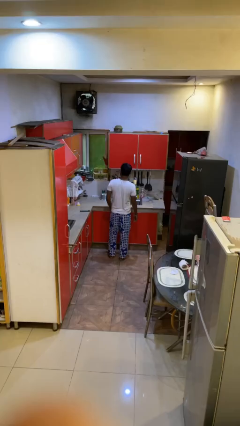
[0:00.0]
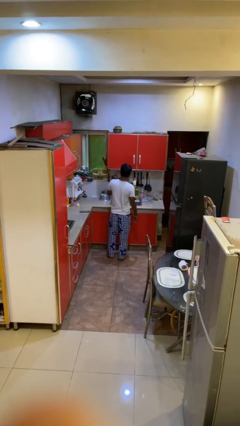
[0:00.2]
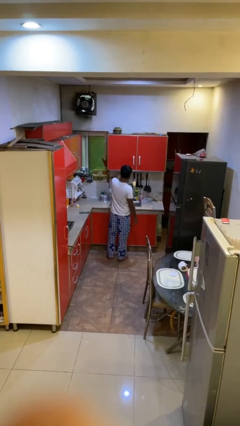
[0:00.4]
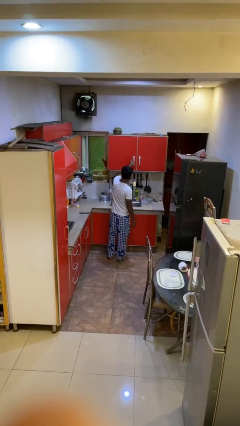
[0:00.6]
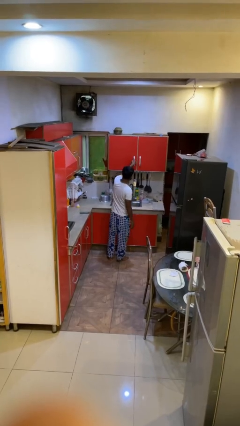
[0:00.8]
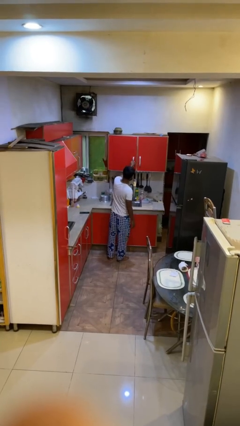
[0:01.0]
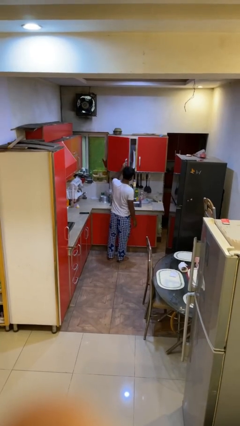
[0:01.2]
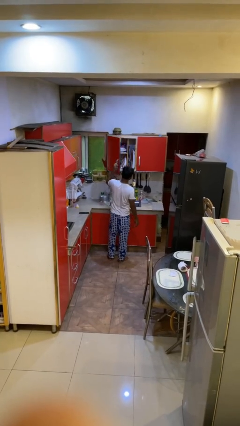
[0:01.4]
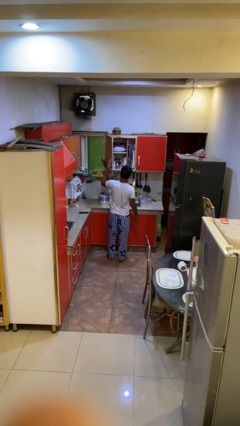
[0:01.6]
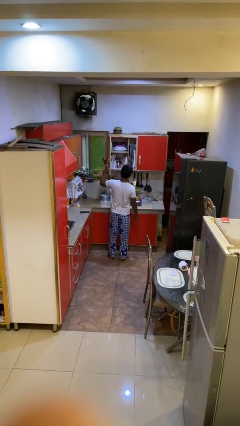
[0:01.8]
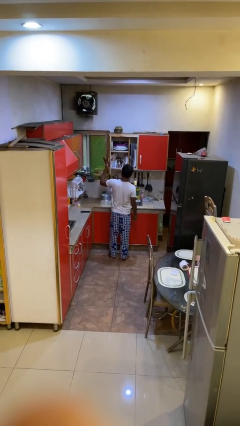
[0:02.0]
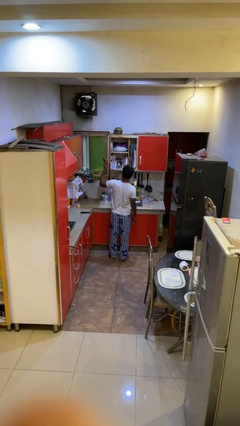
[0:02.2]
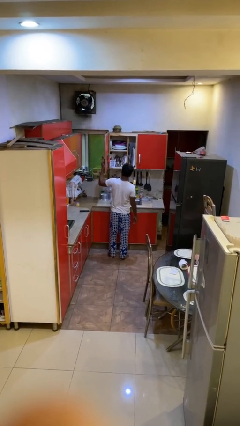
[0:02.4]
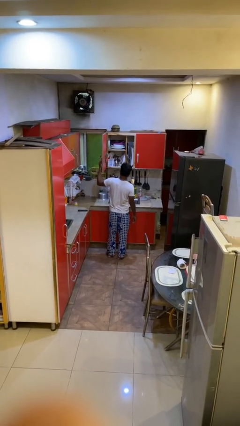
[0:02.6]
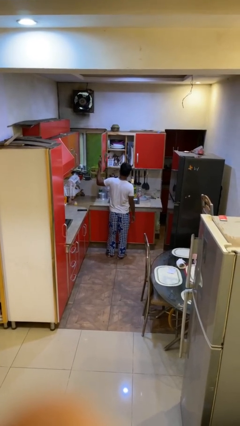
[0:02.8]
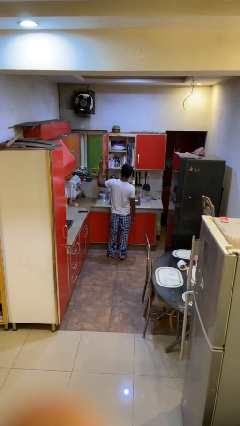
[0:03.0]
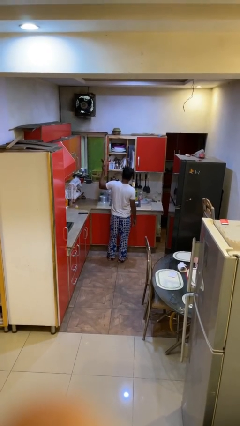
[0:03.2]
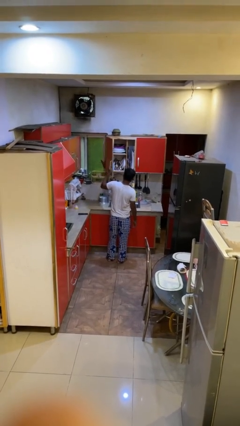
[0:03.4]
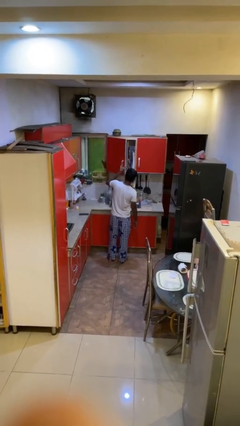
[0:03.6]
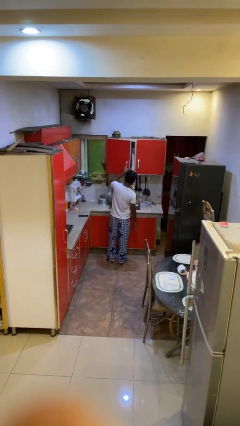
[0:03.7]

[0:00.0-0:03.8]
person opens cabinet

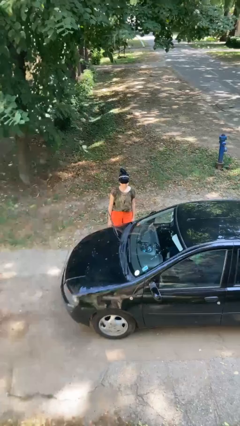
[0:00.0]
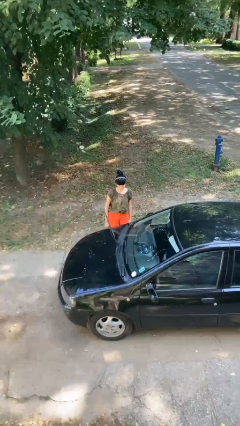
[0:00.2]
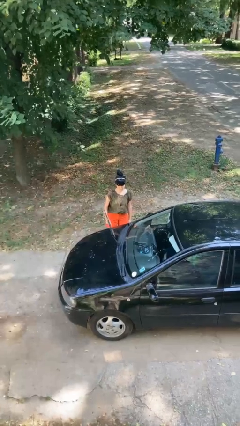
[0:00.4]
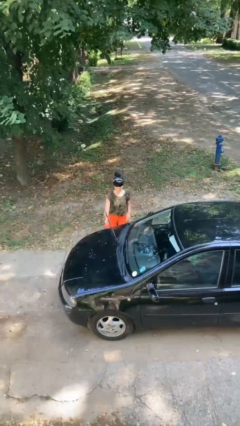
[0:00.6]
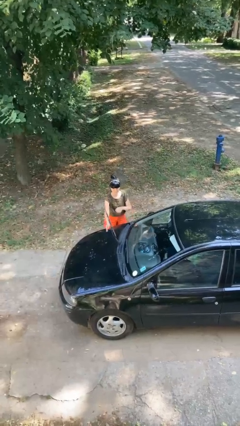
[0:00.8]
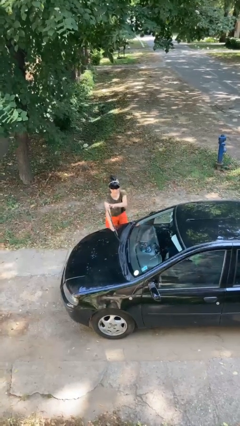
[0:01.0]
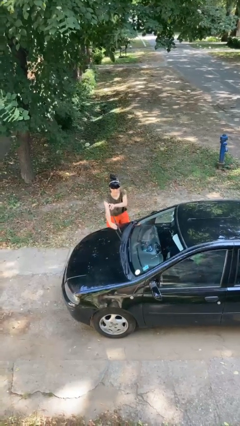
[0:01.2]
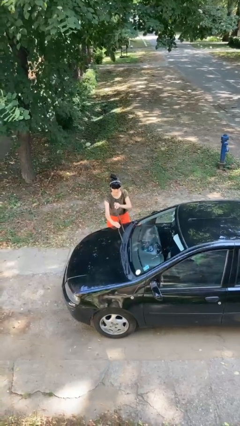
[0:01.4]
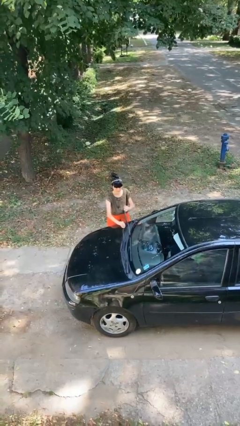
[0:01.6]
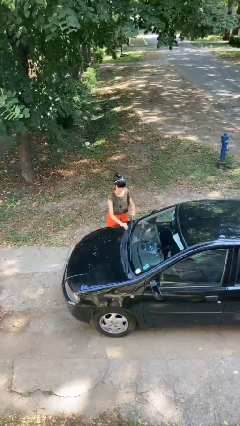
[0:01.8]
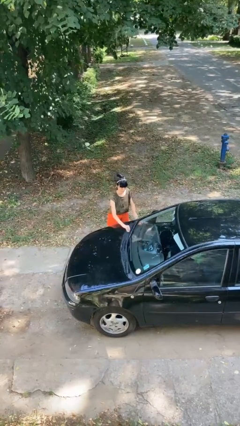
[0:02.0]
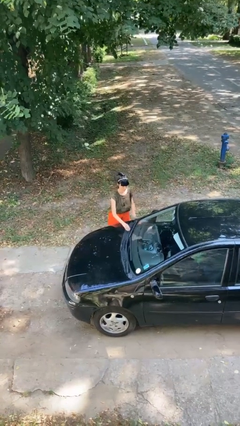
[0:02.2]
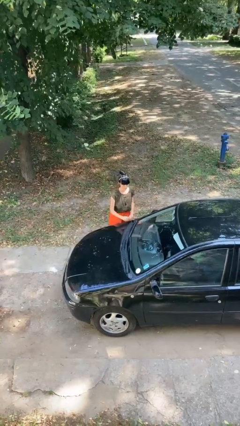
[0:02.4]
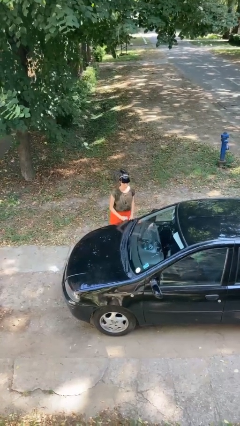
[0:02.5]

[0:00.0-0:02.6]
person flips down car wipers

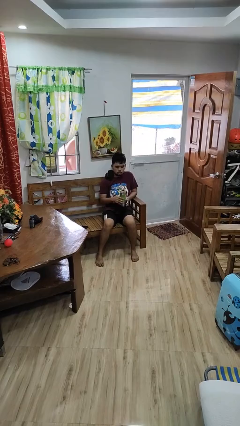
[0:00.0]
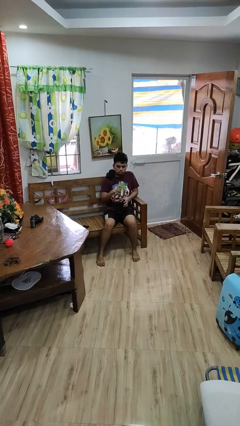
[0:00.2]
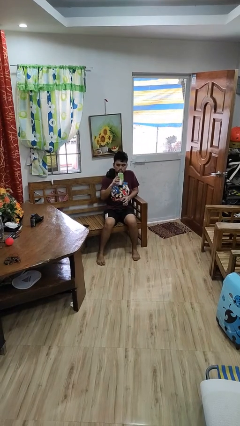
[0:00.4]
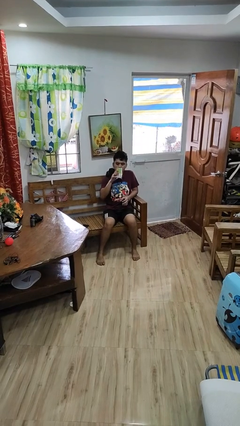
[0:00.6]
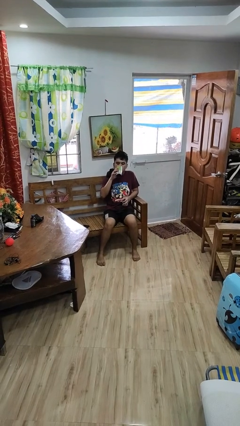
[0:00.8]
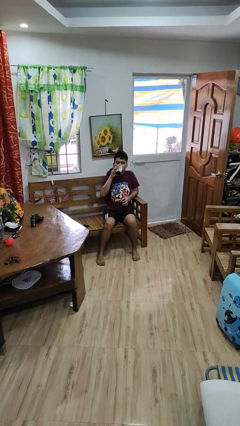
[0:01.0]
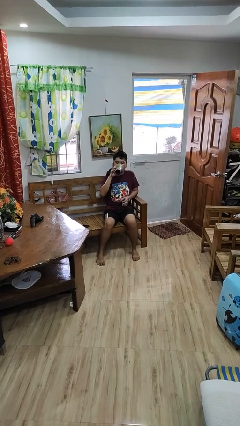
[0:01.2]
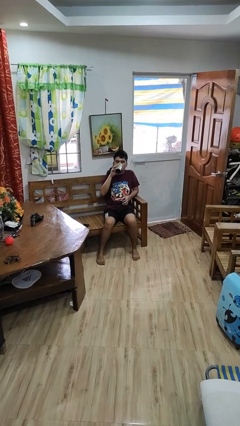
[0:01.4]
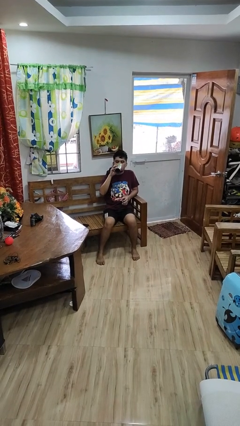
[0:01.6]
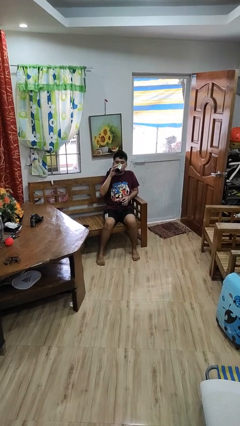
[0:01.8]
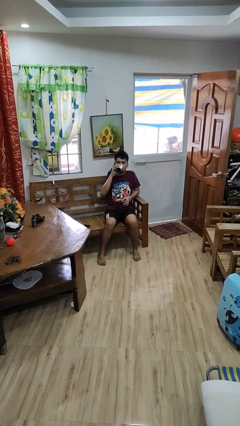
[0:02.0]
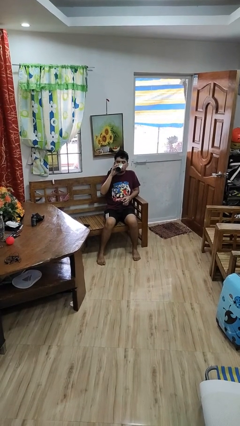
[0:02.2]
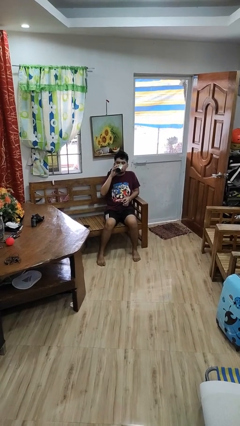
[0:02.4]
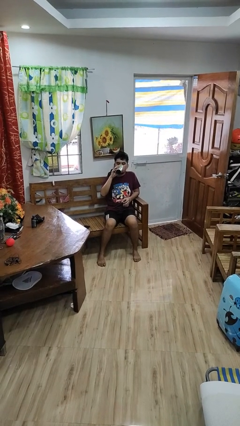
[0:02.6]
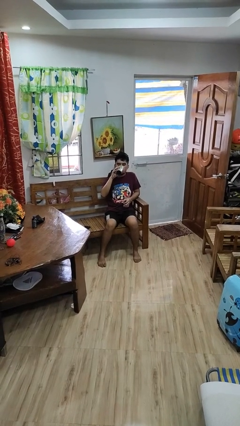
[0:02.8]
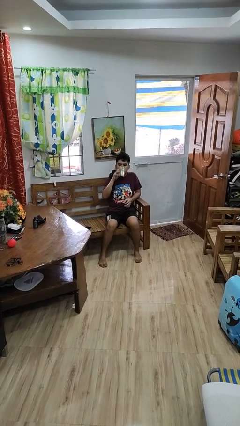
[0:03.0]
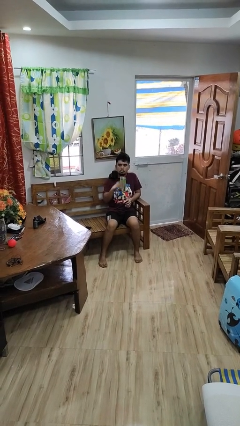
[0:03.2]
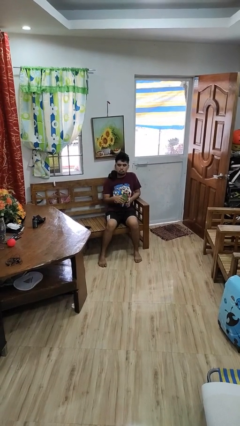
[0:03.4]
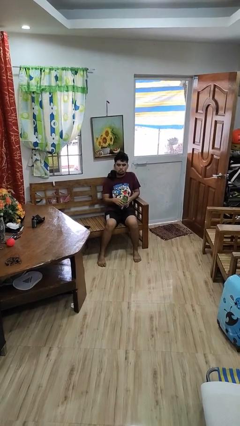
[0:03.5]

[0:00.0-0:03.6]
person drinks from bottle

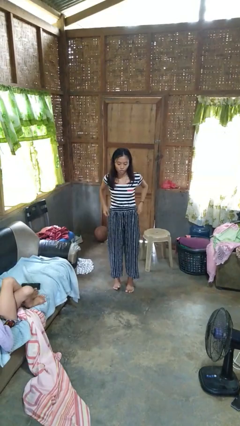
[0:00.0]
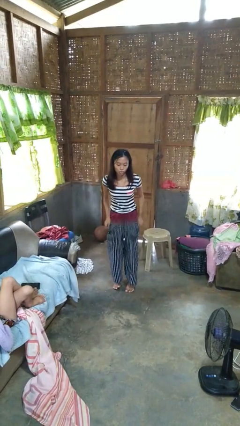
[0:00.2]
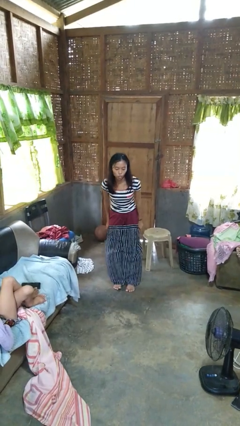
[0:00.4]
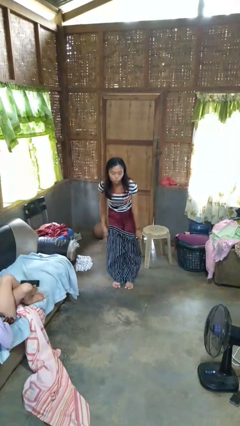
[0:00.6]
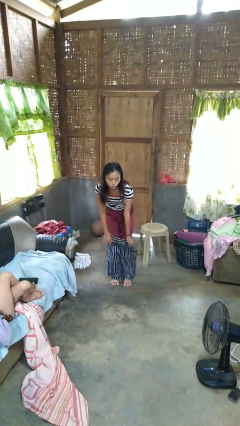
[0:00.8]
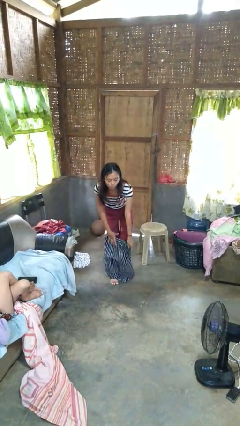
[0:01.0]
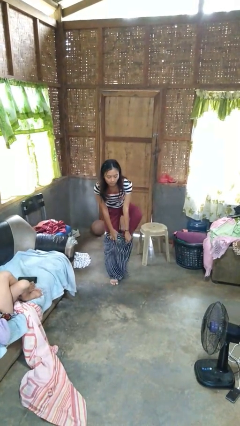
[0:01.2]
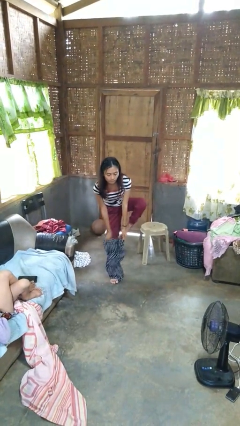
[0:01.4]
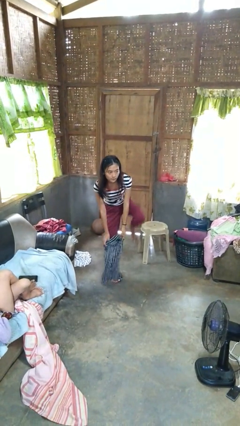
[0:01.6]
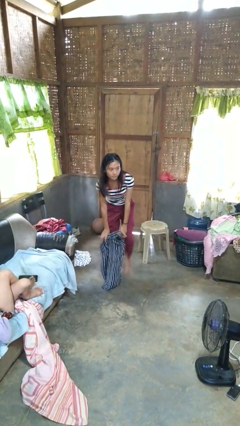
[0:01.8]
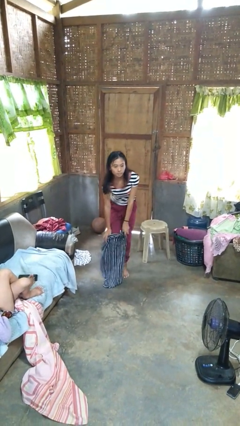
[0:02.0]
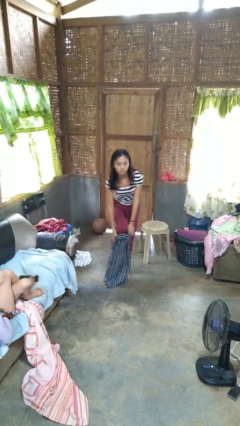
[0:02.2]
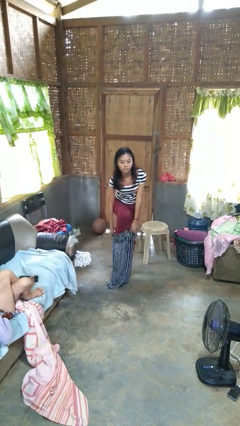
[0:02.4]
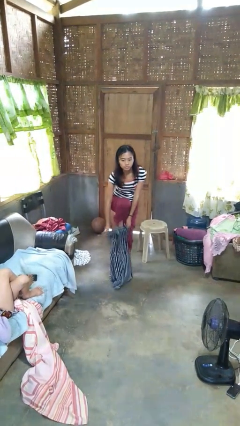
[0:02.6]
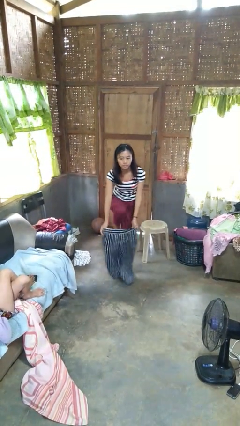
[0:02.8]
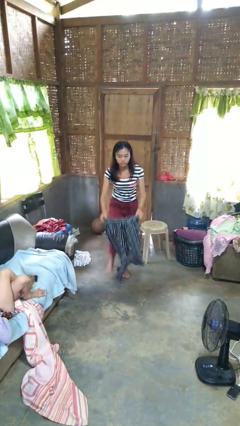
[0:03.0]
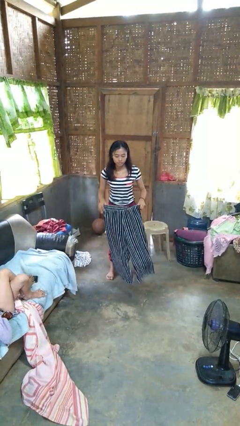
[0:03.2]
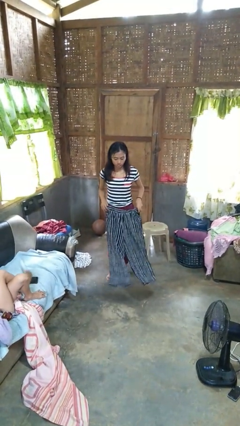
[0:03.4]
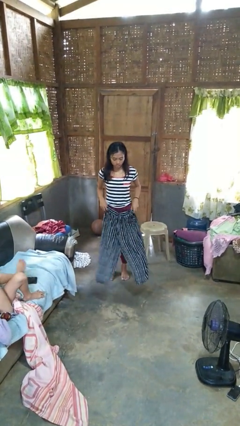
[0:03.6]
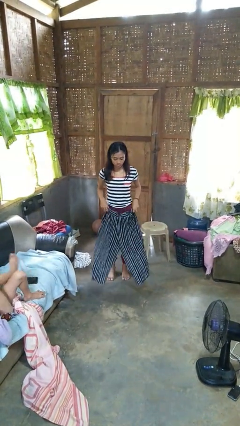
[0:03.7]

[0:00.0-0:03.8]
person takes off pants

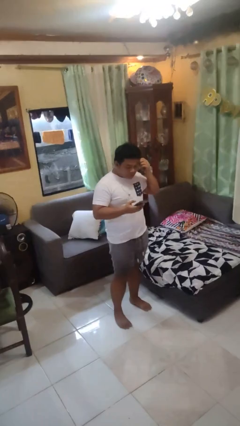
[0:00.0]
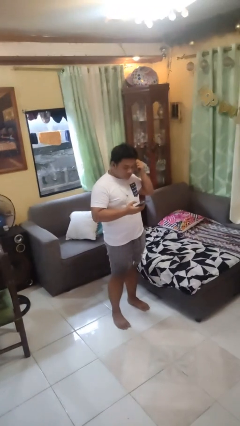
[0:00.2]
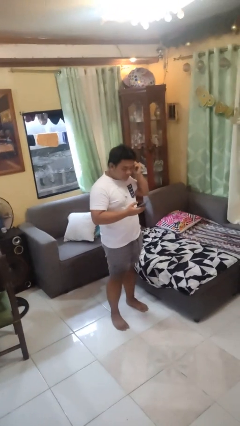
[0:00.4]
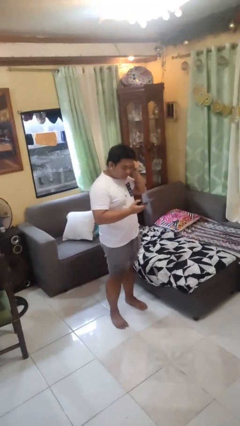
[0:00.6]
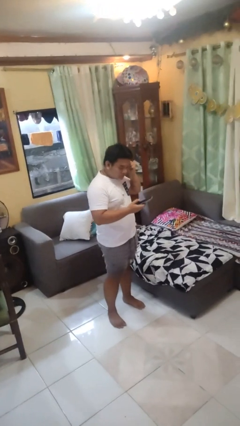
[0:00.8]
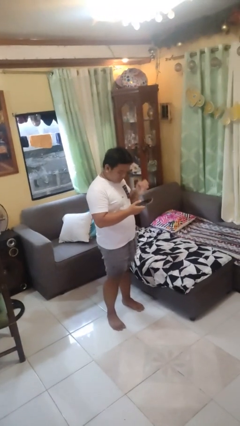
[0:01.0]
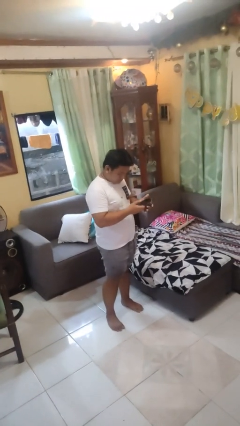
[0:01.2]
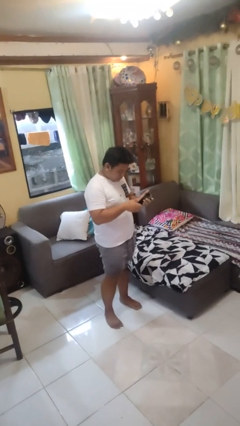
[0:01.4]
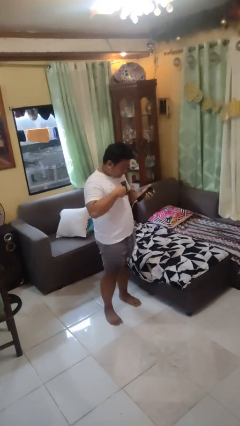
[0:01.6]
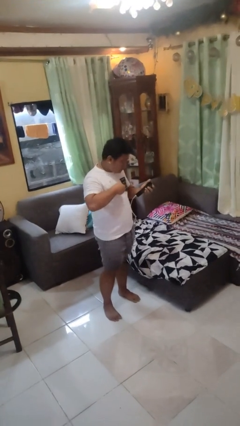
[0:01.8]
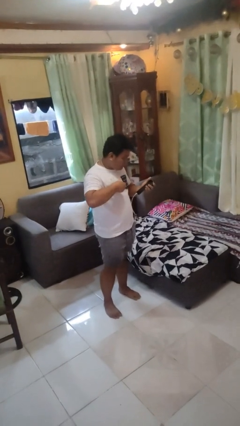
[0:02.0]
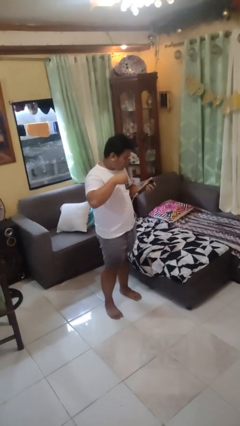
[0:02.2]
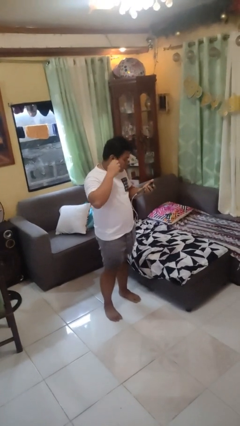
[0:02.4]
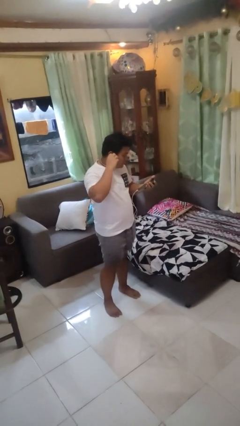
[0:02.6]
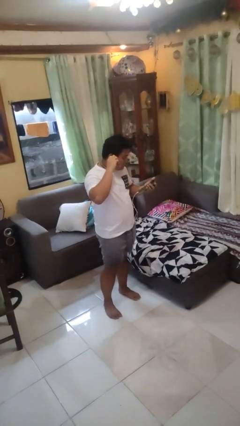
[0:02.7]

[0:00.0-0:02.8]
person puts on headphones

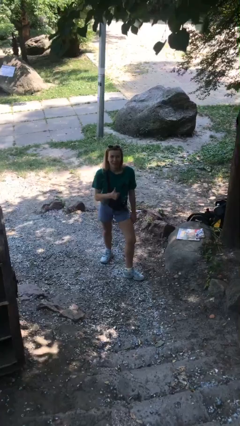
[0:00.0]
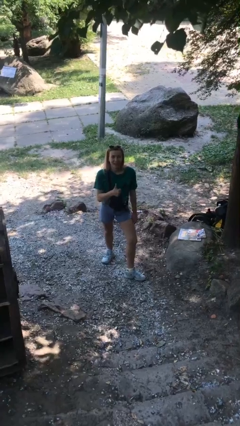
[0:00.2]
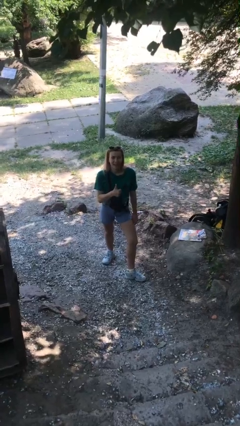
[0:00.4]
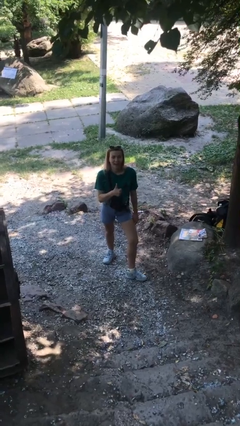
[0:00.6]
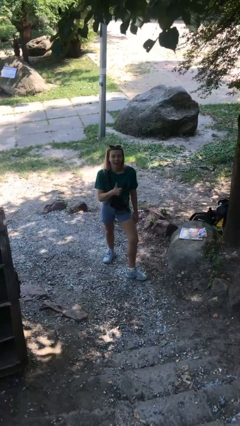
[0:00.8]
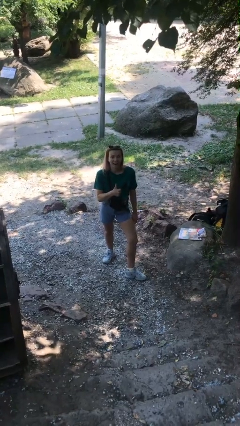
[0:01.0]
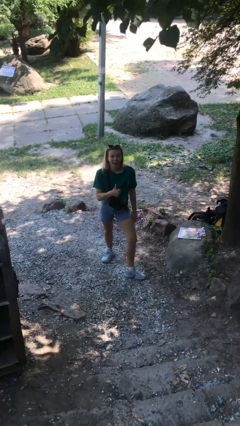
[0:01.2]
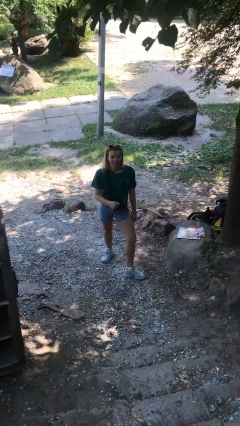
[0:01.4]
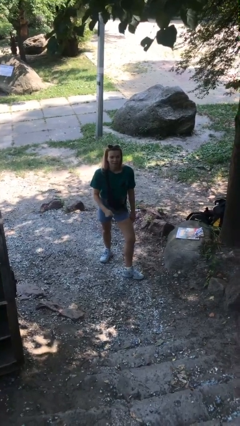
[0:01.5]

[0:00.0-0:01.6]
person gestures thumbs up
